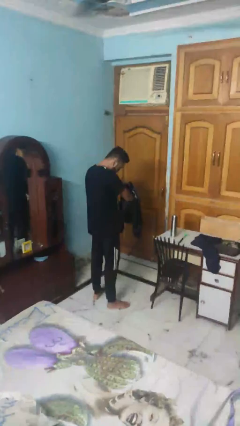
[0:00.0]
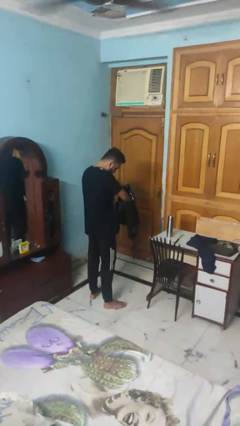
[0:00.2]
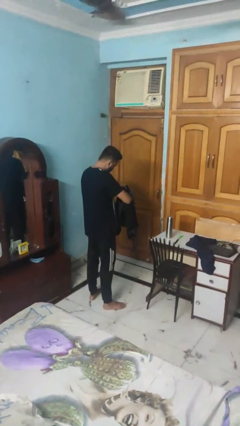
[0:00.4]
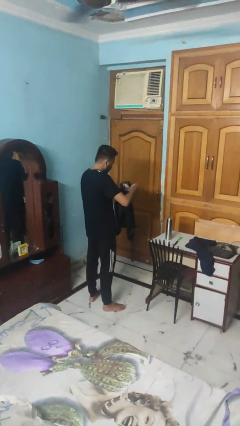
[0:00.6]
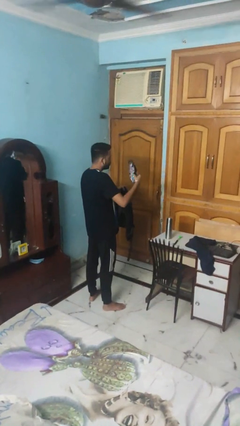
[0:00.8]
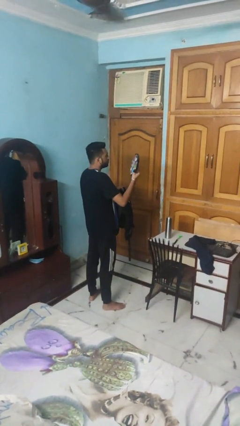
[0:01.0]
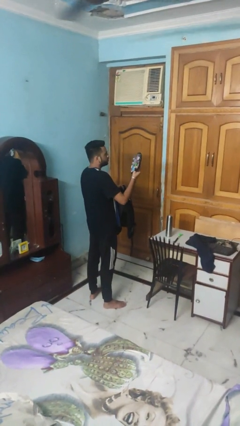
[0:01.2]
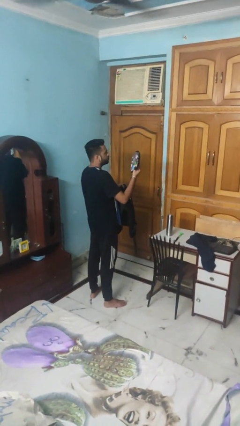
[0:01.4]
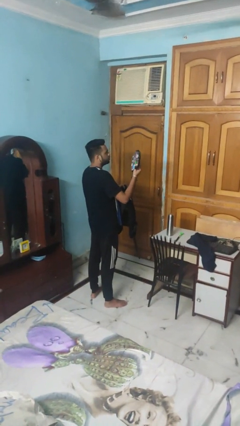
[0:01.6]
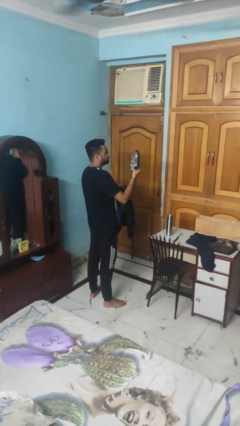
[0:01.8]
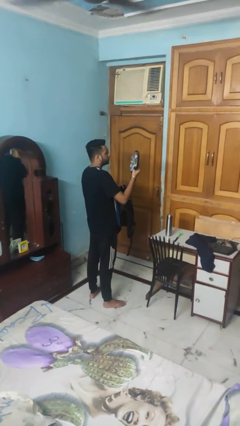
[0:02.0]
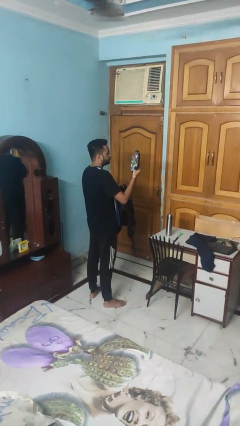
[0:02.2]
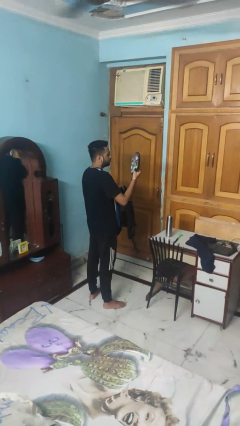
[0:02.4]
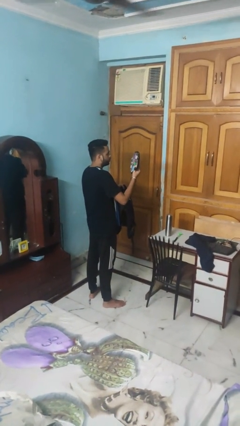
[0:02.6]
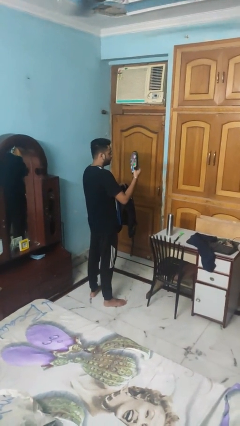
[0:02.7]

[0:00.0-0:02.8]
person takes object from backpack

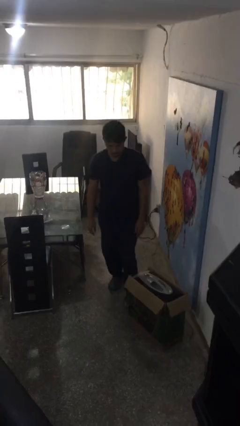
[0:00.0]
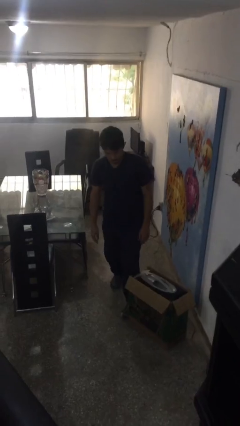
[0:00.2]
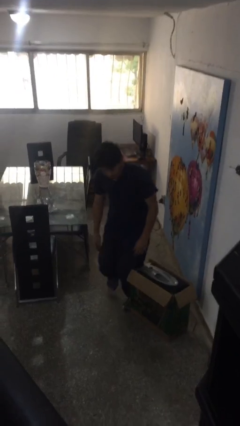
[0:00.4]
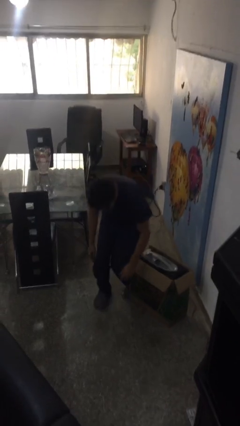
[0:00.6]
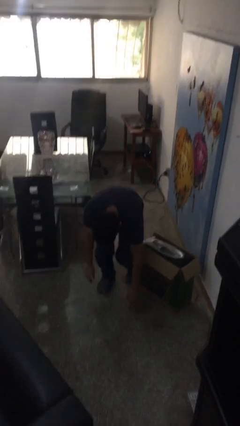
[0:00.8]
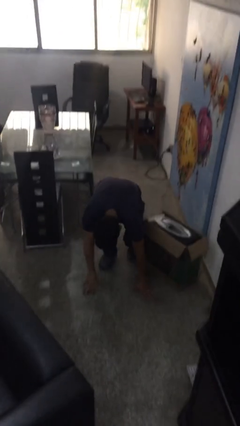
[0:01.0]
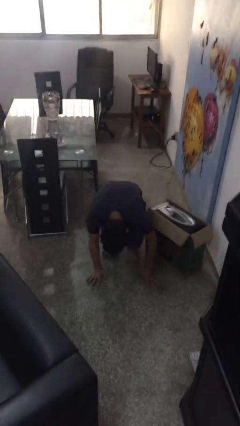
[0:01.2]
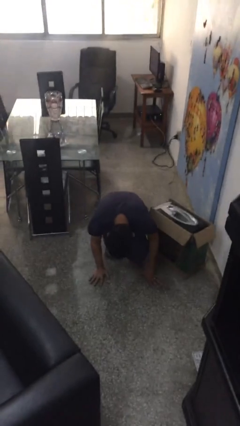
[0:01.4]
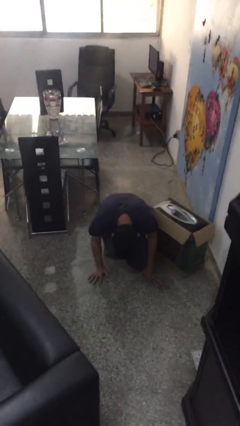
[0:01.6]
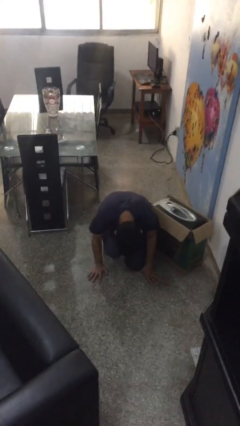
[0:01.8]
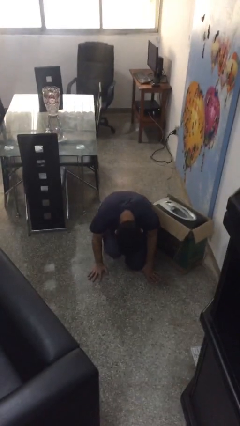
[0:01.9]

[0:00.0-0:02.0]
person trips on object on floor

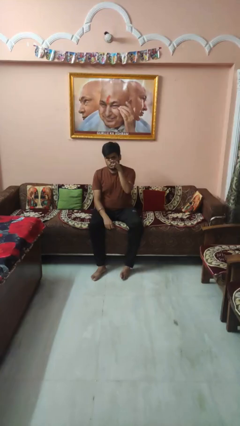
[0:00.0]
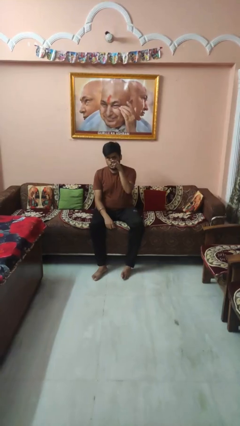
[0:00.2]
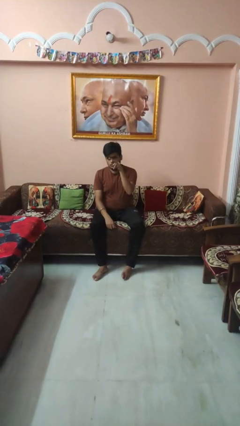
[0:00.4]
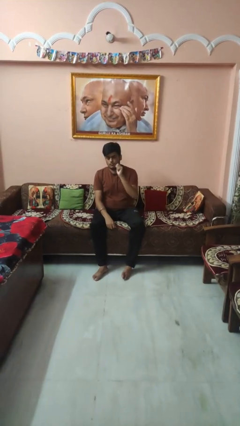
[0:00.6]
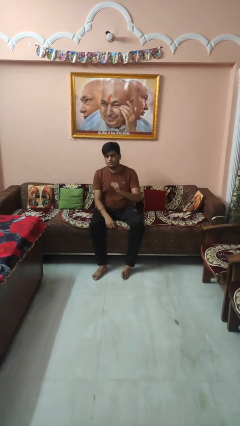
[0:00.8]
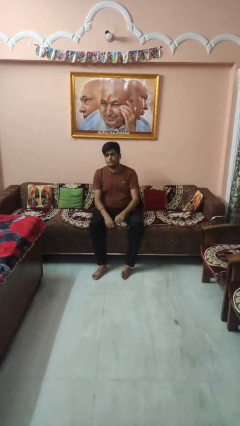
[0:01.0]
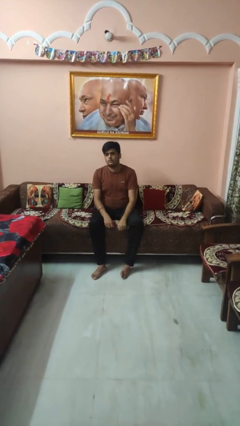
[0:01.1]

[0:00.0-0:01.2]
person gestures watch closely

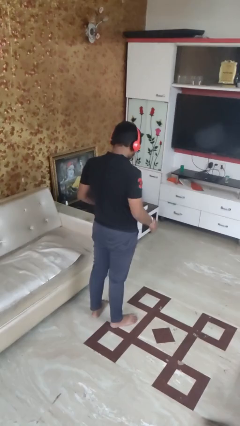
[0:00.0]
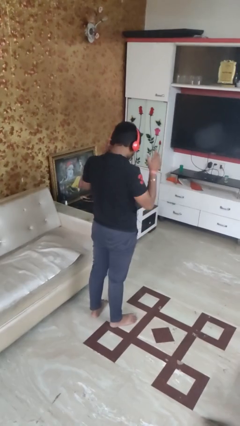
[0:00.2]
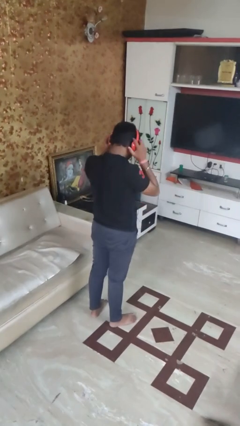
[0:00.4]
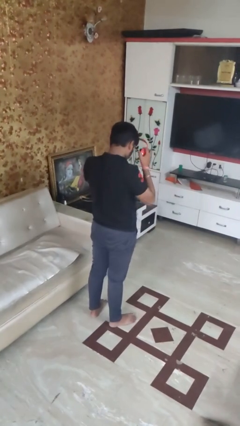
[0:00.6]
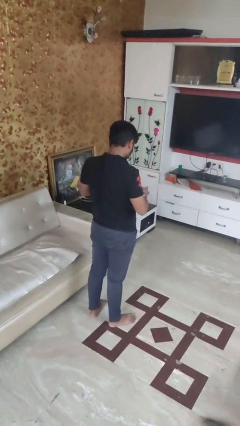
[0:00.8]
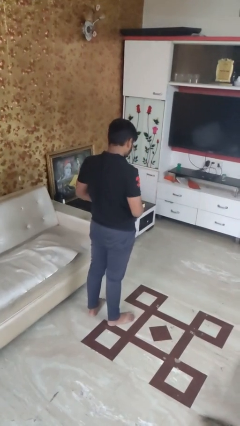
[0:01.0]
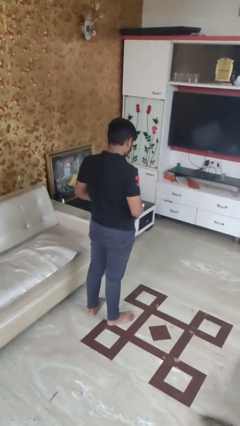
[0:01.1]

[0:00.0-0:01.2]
person takes off headphones

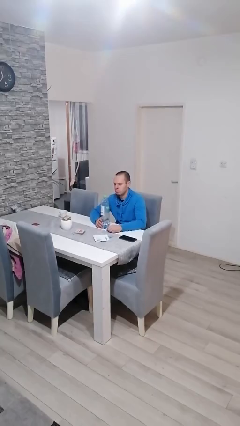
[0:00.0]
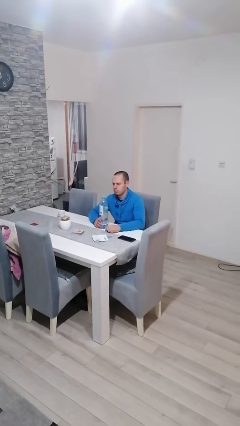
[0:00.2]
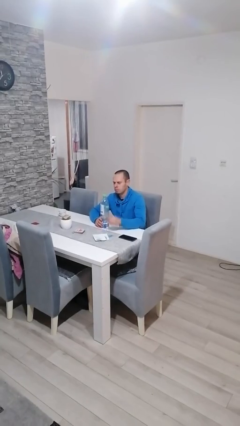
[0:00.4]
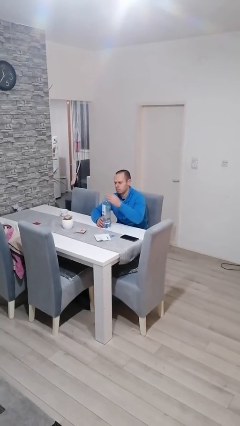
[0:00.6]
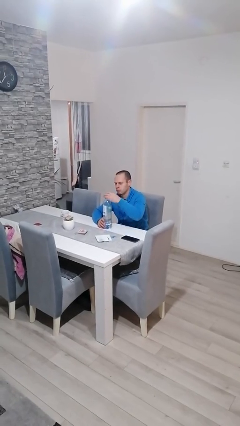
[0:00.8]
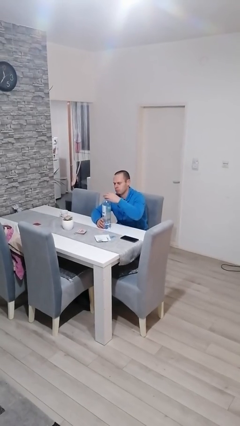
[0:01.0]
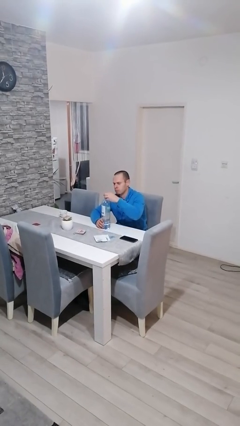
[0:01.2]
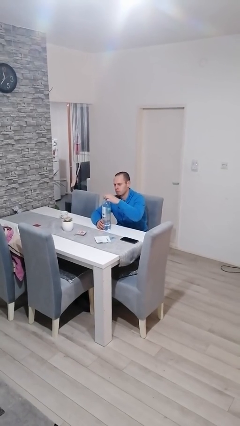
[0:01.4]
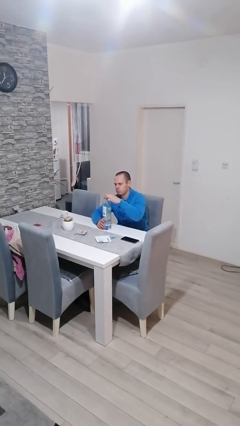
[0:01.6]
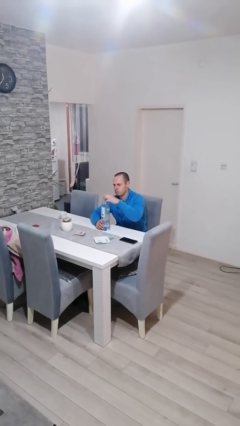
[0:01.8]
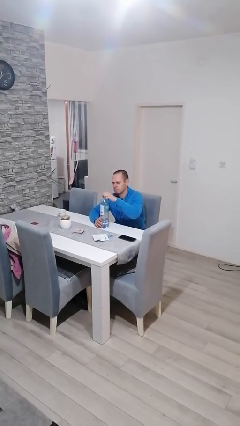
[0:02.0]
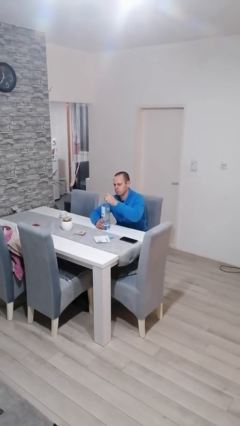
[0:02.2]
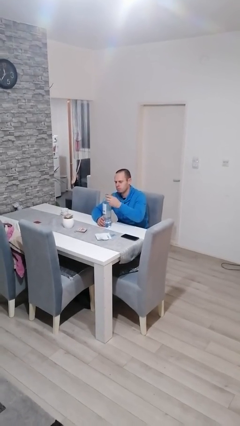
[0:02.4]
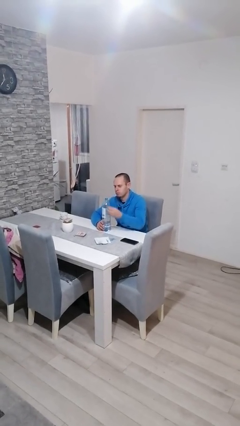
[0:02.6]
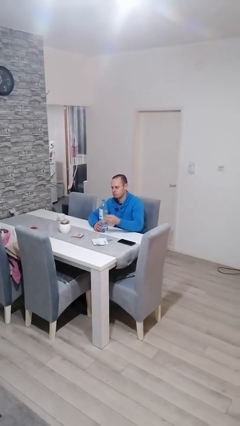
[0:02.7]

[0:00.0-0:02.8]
person unscrews lid from bottle

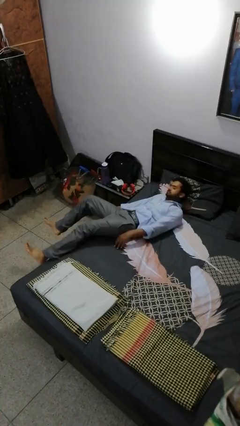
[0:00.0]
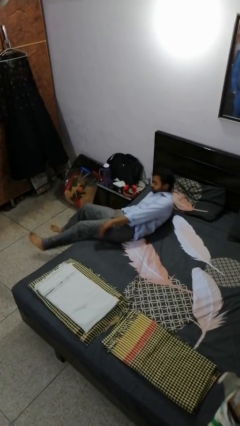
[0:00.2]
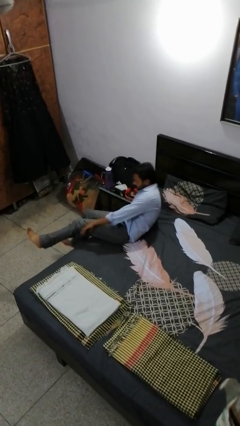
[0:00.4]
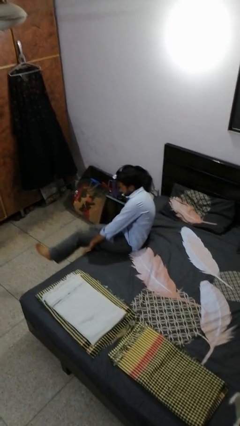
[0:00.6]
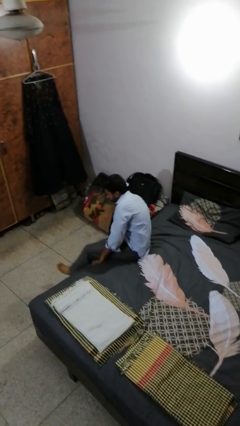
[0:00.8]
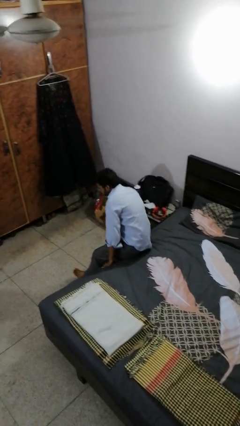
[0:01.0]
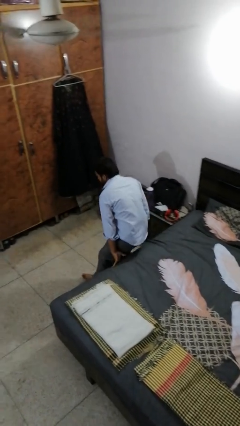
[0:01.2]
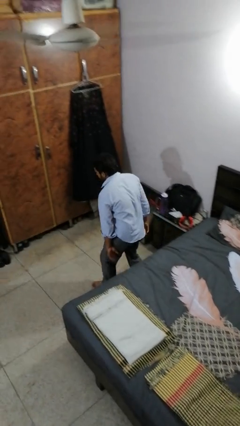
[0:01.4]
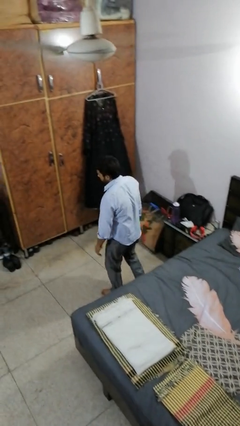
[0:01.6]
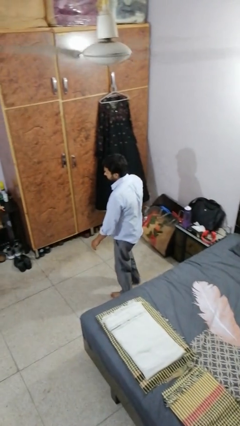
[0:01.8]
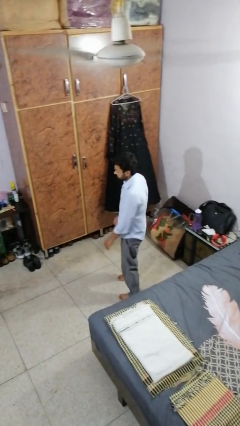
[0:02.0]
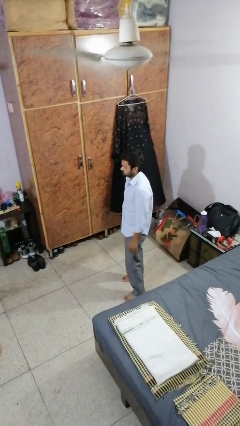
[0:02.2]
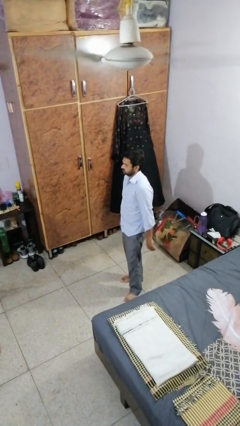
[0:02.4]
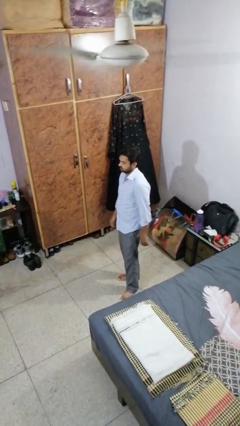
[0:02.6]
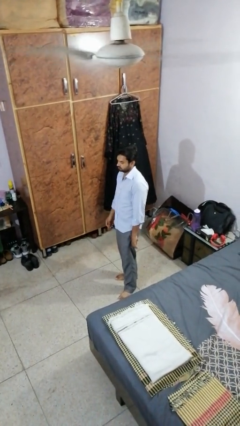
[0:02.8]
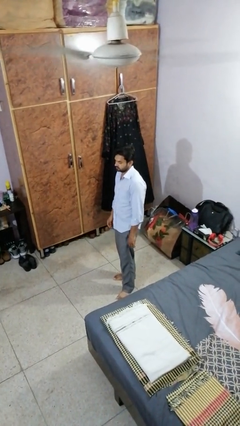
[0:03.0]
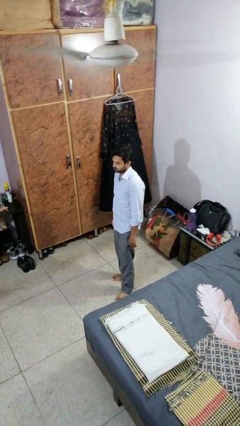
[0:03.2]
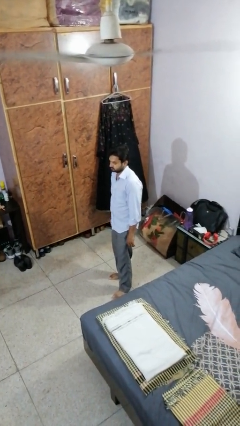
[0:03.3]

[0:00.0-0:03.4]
person stands up

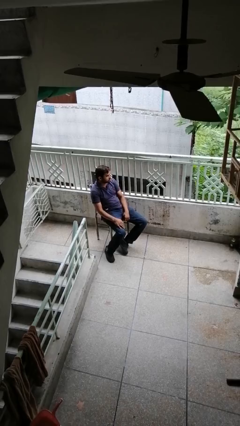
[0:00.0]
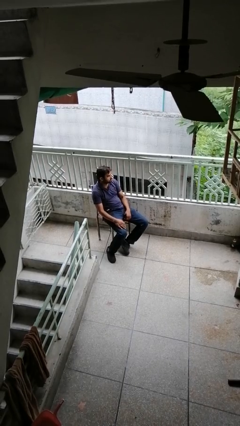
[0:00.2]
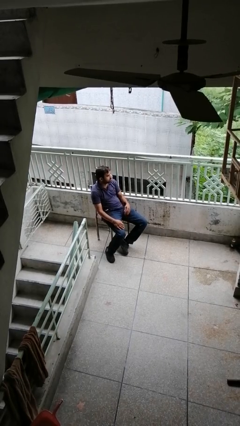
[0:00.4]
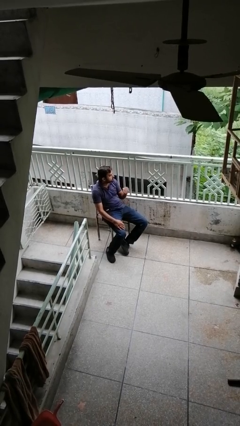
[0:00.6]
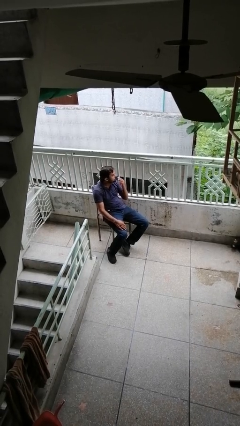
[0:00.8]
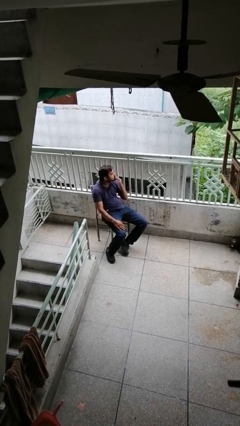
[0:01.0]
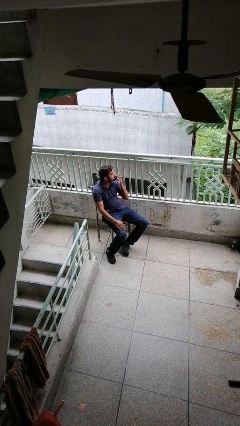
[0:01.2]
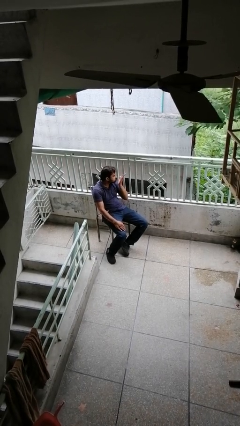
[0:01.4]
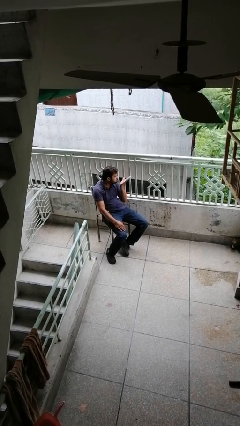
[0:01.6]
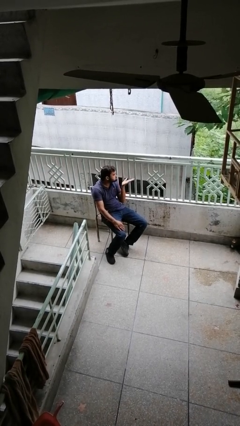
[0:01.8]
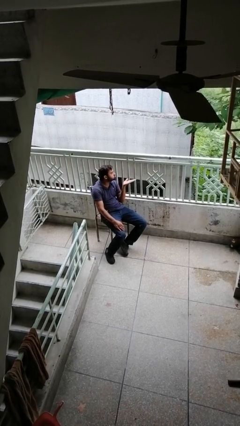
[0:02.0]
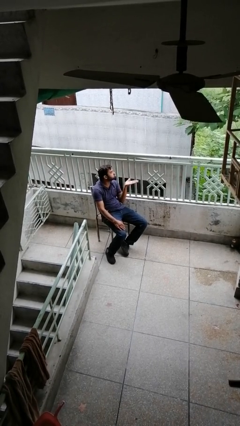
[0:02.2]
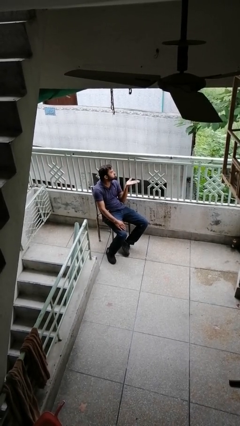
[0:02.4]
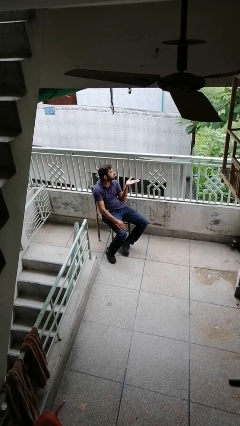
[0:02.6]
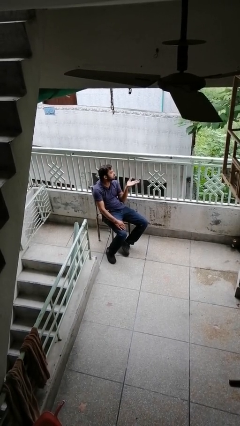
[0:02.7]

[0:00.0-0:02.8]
person gestures blow kiss

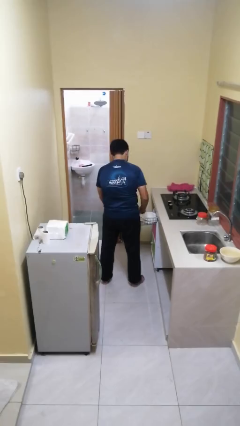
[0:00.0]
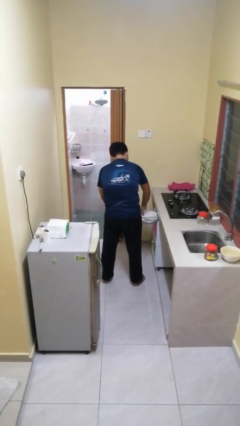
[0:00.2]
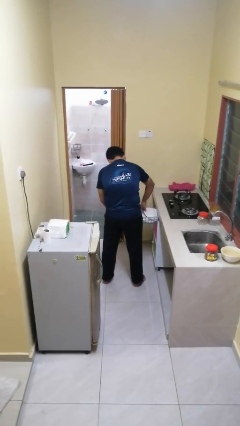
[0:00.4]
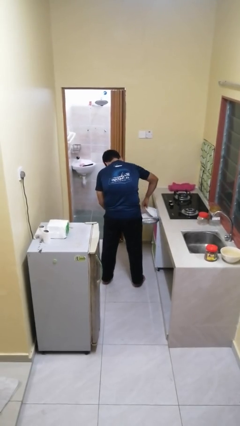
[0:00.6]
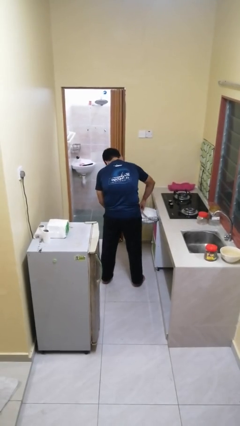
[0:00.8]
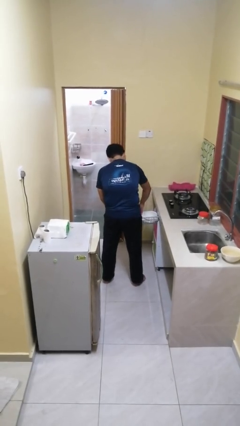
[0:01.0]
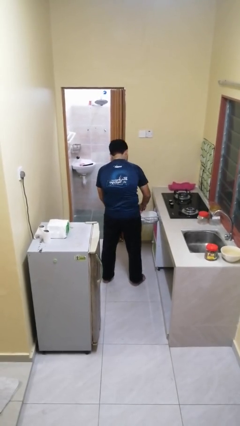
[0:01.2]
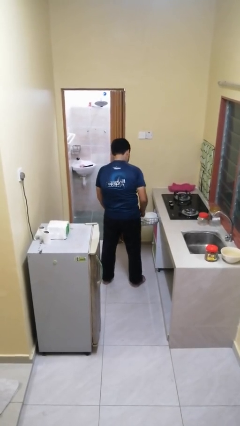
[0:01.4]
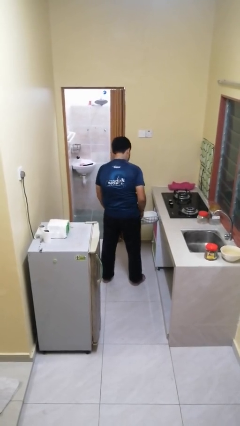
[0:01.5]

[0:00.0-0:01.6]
person searches in kitchen drawer
